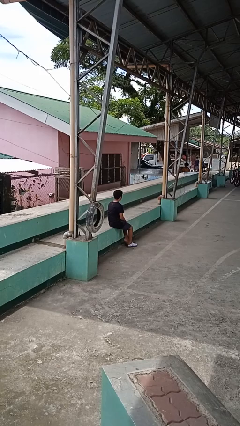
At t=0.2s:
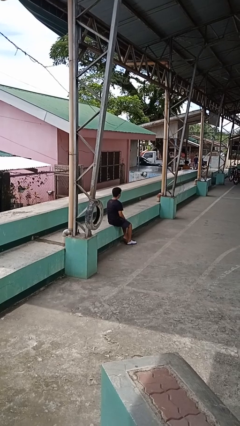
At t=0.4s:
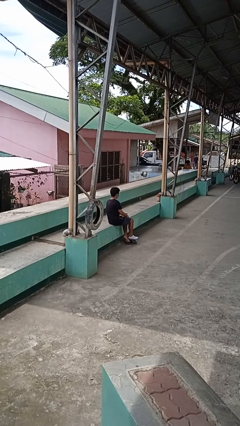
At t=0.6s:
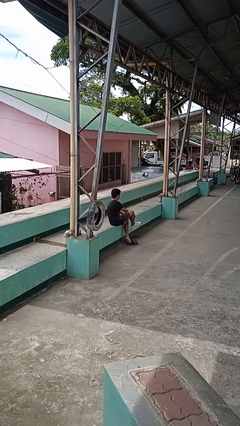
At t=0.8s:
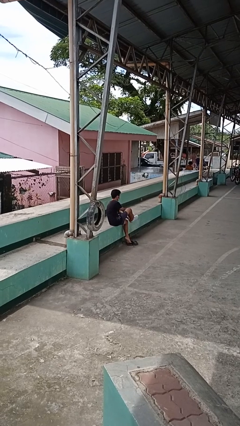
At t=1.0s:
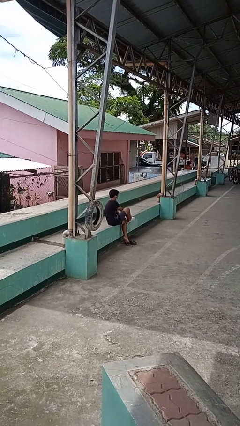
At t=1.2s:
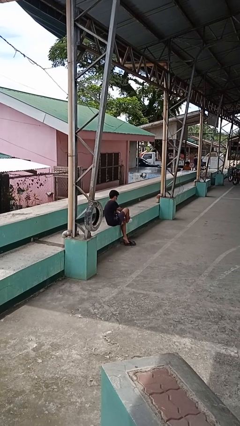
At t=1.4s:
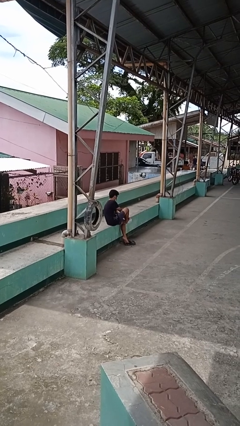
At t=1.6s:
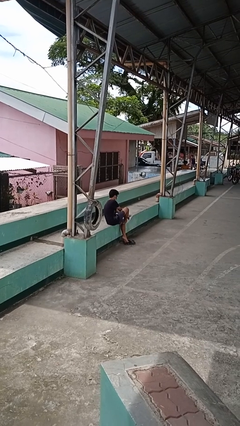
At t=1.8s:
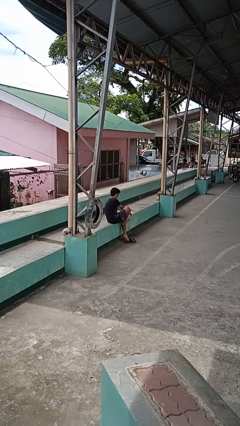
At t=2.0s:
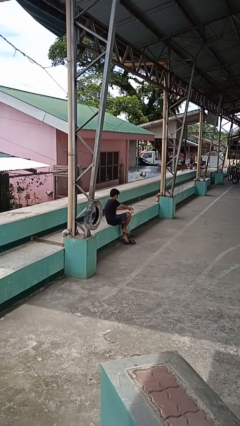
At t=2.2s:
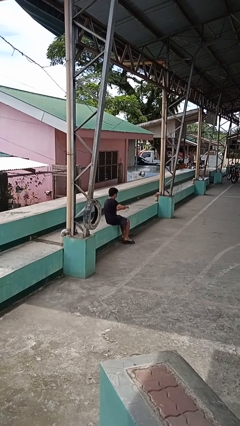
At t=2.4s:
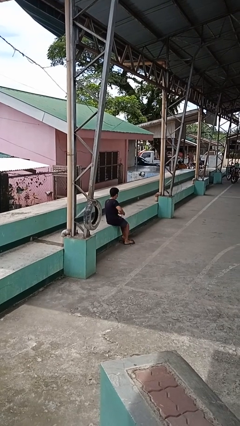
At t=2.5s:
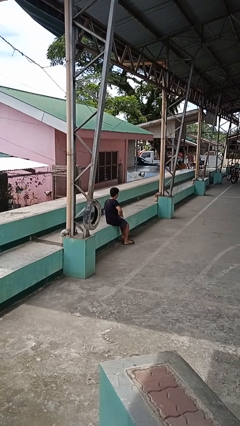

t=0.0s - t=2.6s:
person takes off socks

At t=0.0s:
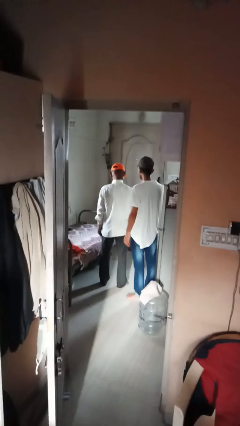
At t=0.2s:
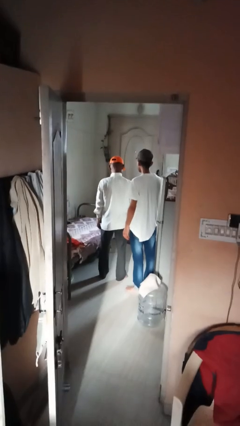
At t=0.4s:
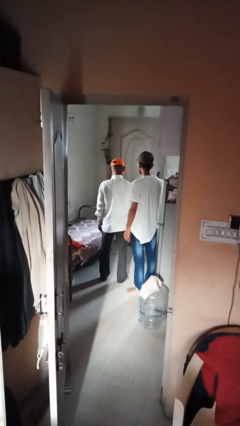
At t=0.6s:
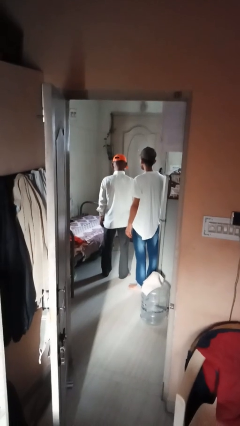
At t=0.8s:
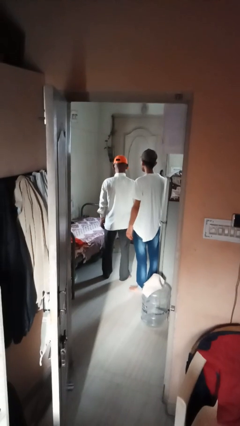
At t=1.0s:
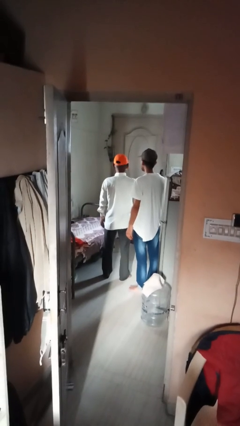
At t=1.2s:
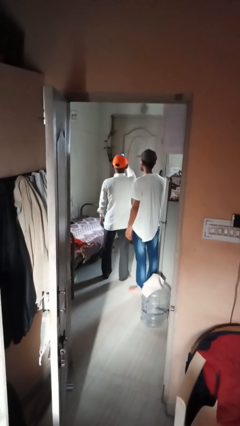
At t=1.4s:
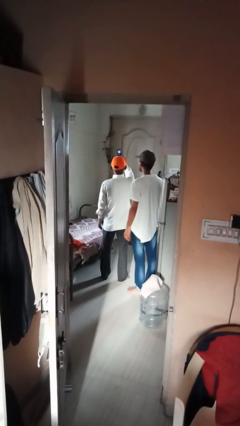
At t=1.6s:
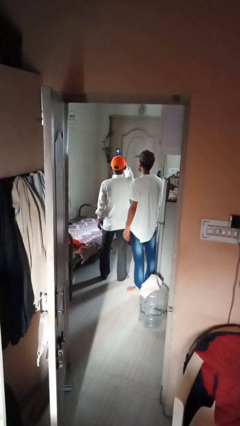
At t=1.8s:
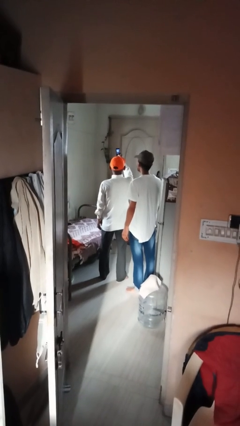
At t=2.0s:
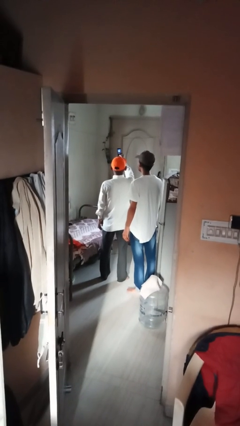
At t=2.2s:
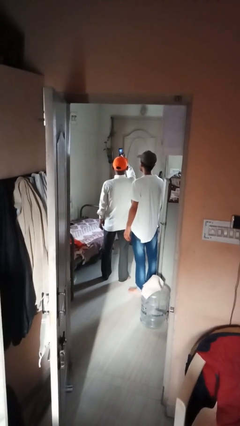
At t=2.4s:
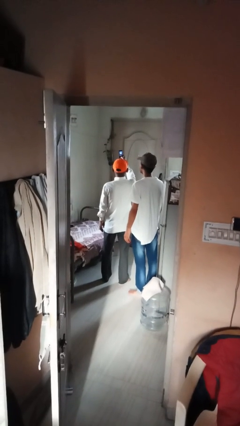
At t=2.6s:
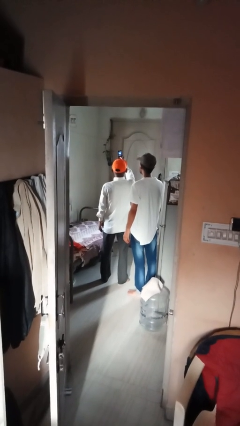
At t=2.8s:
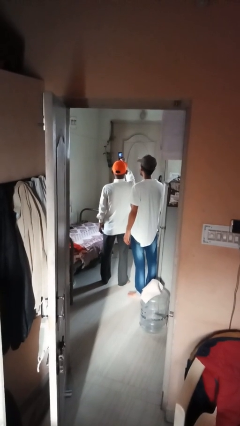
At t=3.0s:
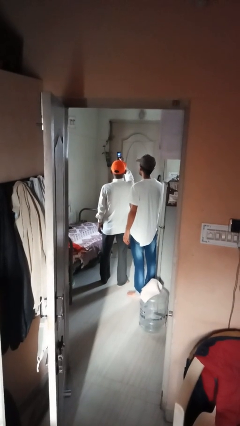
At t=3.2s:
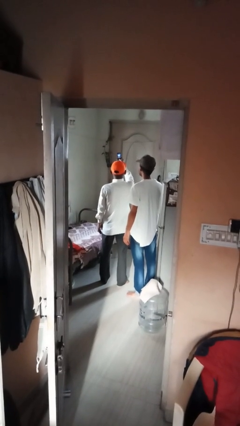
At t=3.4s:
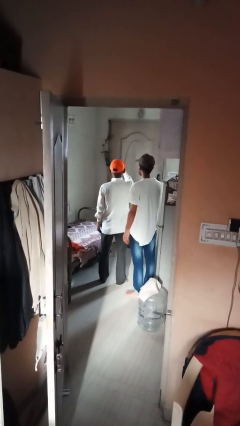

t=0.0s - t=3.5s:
person takes selfie with person

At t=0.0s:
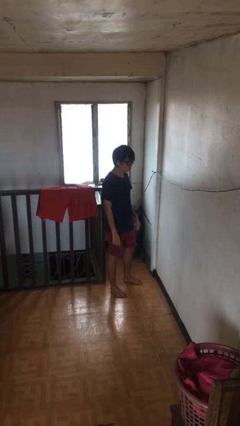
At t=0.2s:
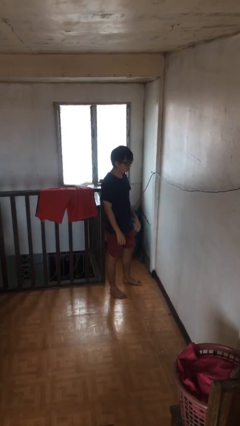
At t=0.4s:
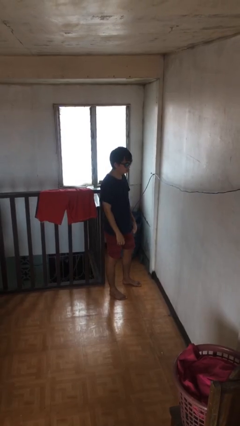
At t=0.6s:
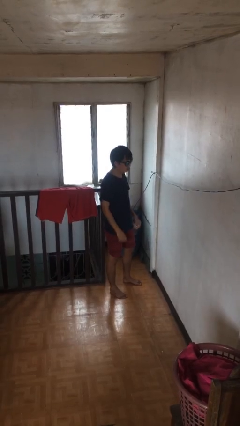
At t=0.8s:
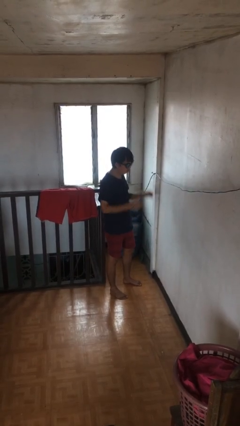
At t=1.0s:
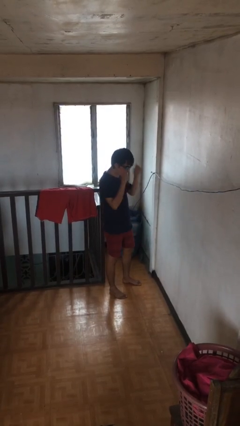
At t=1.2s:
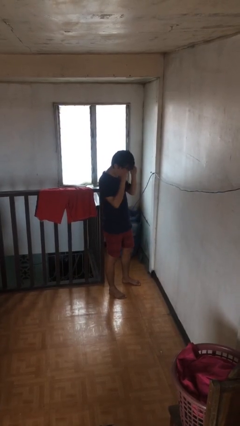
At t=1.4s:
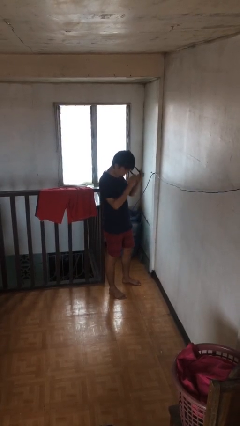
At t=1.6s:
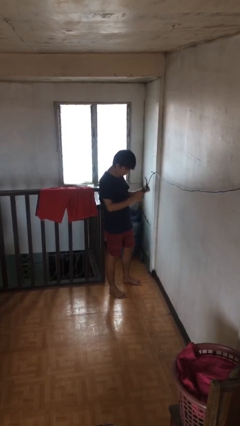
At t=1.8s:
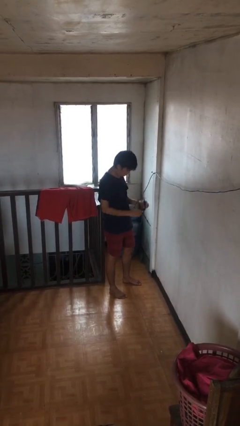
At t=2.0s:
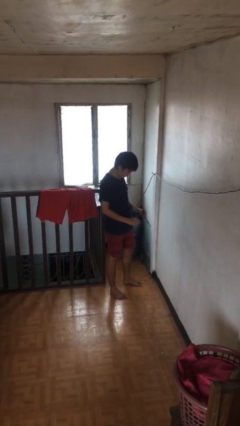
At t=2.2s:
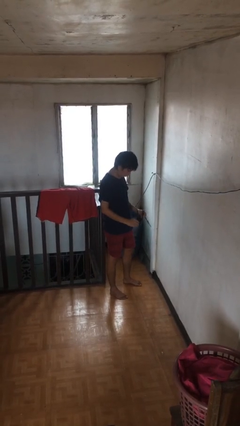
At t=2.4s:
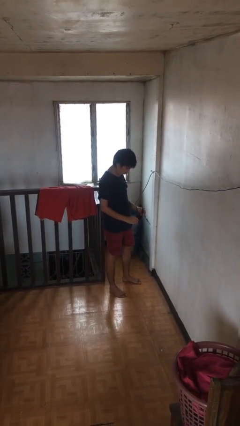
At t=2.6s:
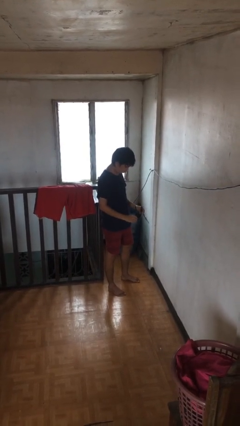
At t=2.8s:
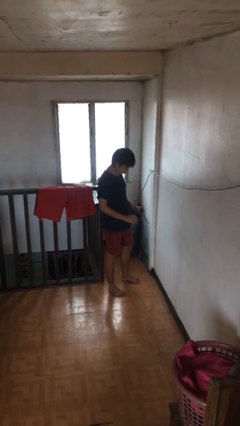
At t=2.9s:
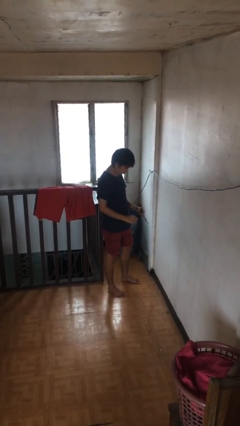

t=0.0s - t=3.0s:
person takes off sunglasses

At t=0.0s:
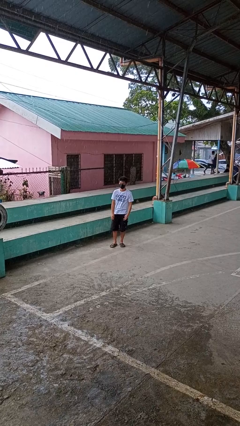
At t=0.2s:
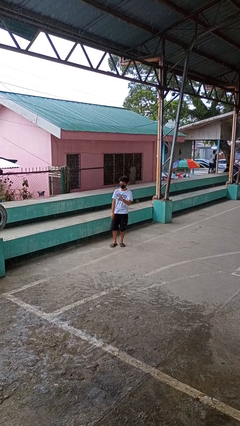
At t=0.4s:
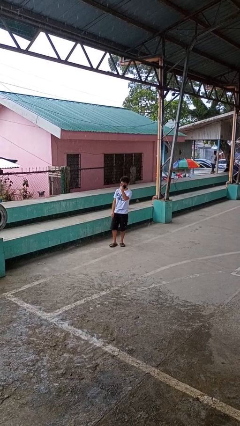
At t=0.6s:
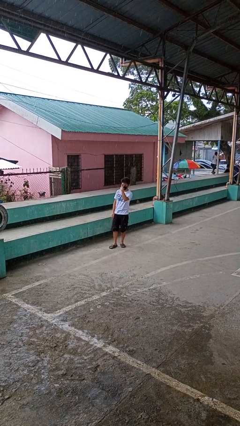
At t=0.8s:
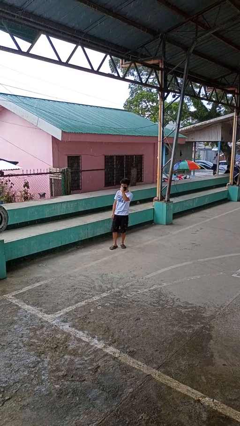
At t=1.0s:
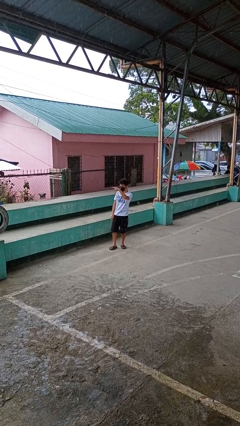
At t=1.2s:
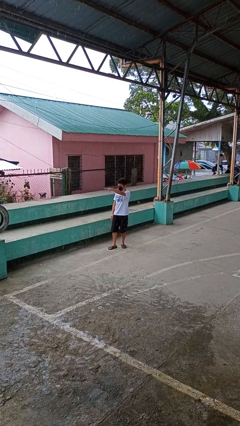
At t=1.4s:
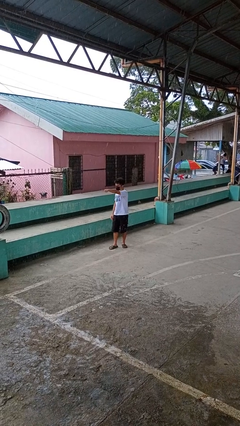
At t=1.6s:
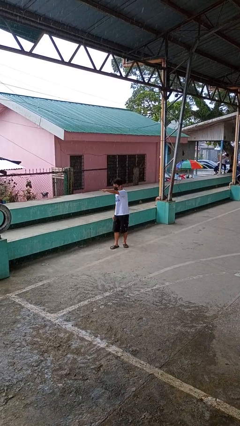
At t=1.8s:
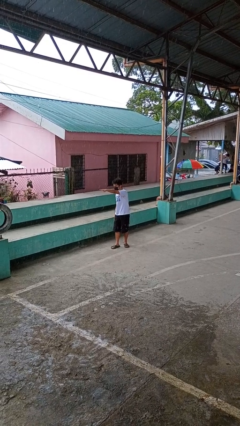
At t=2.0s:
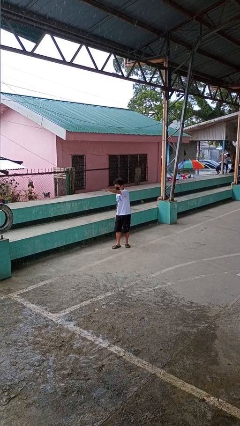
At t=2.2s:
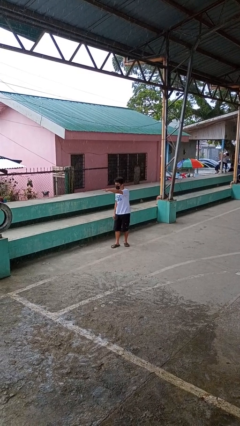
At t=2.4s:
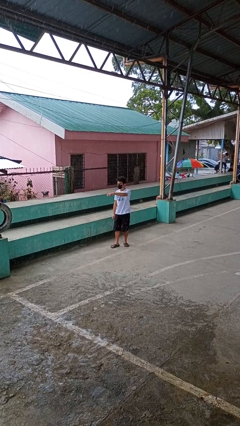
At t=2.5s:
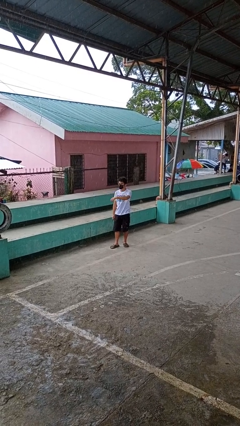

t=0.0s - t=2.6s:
person gestures watch closely

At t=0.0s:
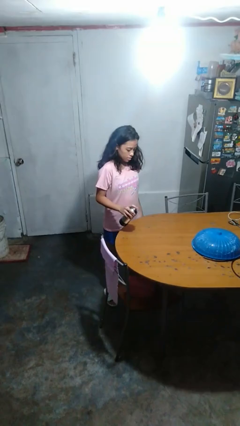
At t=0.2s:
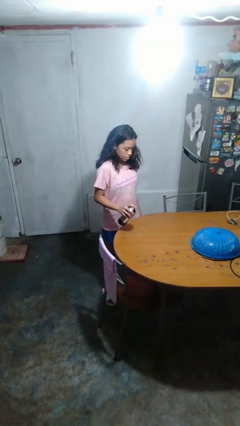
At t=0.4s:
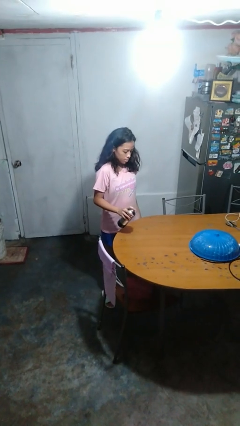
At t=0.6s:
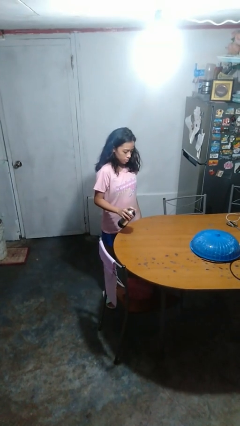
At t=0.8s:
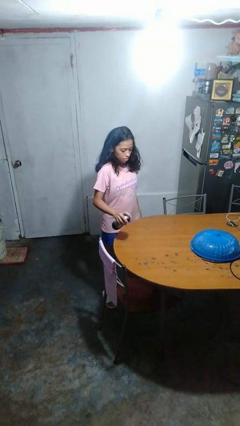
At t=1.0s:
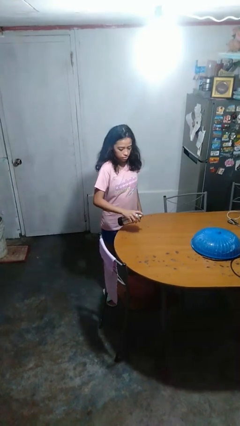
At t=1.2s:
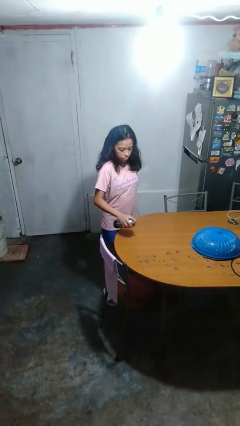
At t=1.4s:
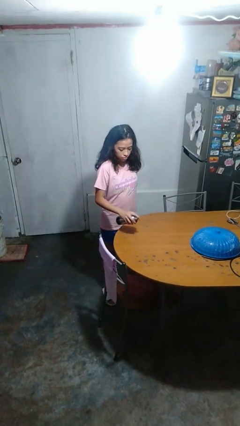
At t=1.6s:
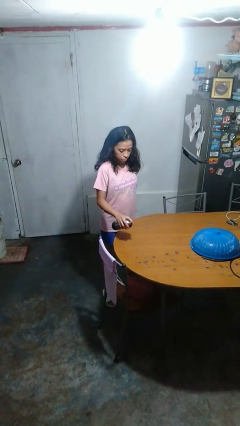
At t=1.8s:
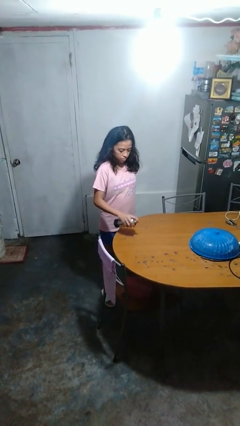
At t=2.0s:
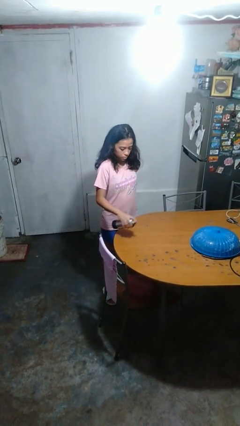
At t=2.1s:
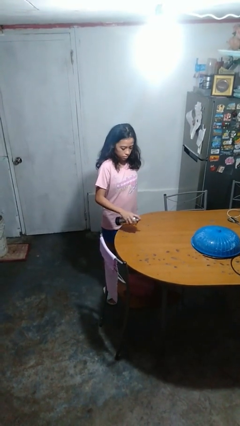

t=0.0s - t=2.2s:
person sprays from bottle

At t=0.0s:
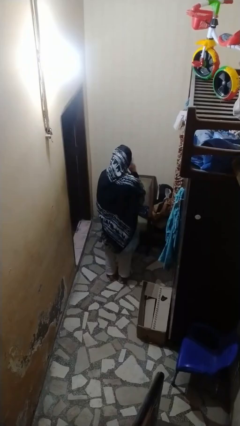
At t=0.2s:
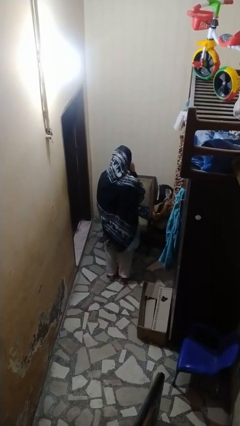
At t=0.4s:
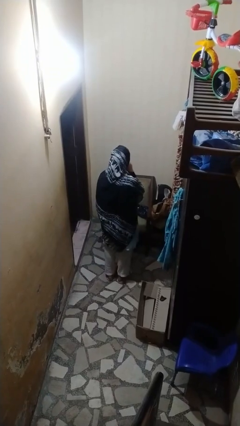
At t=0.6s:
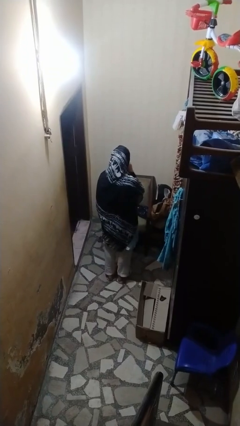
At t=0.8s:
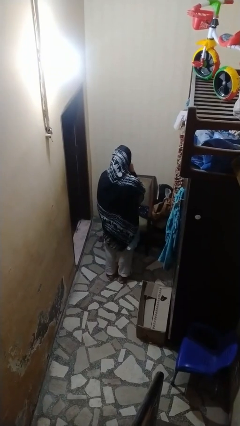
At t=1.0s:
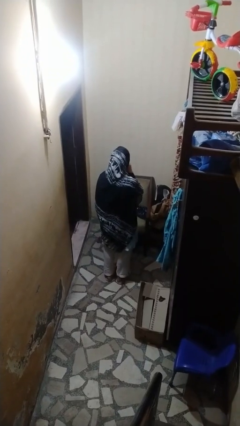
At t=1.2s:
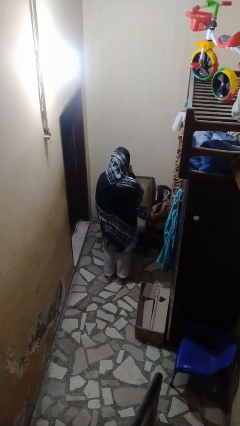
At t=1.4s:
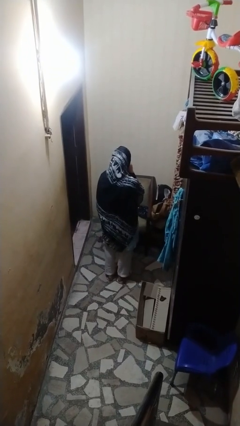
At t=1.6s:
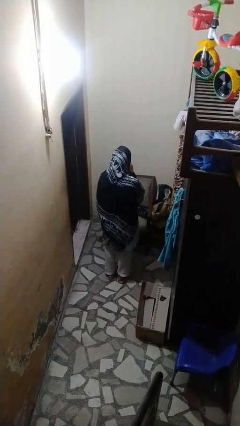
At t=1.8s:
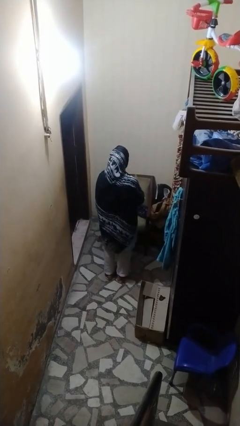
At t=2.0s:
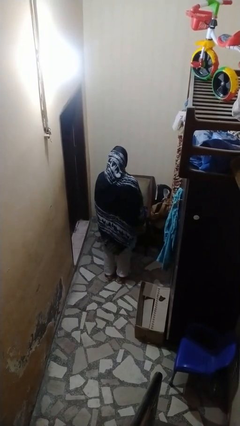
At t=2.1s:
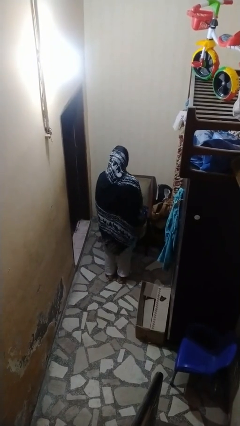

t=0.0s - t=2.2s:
person gestures be quiet

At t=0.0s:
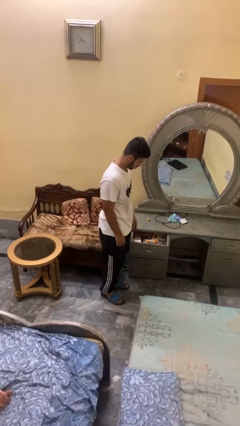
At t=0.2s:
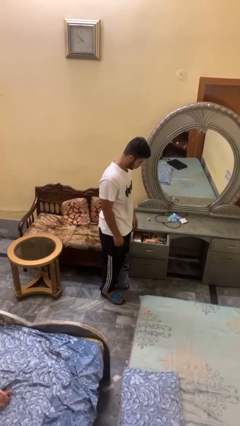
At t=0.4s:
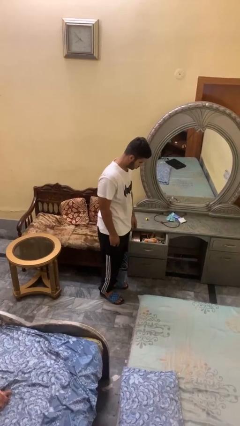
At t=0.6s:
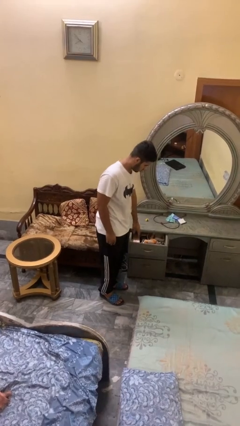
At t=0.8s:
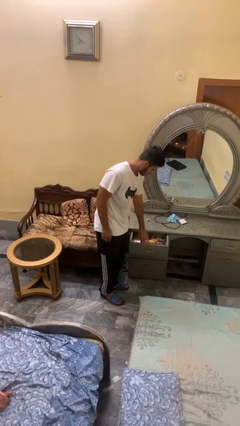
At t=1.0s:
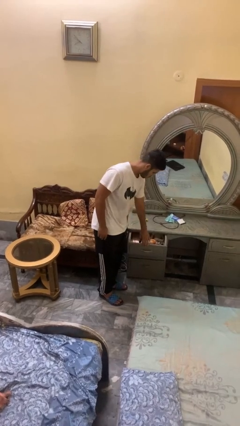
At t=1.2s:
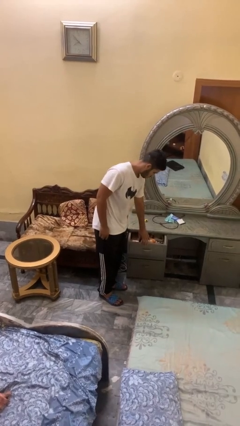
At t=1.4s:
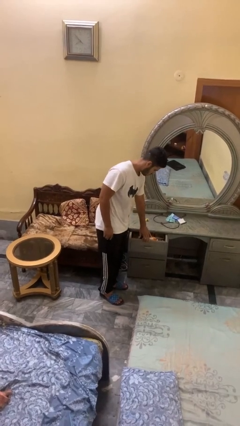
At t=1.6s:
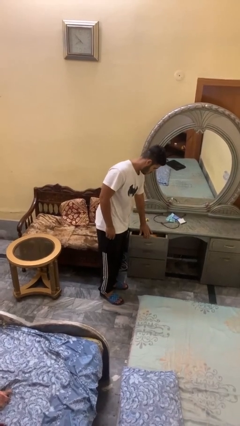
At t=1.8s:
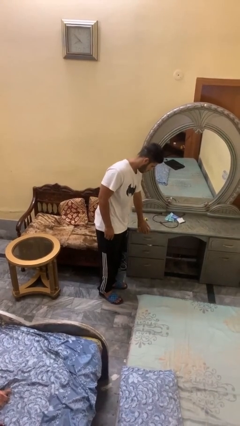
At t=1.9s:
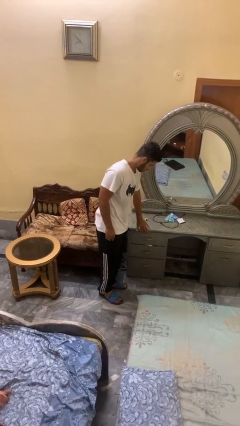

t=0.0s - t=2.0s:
person closes dresser drawer
